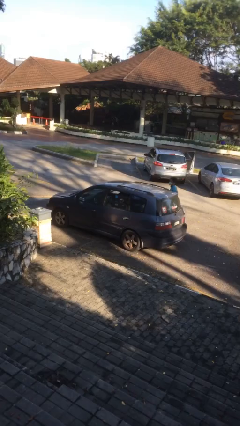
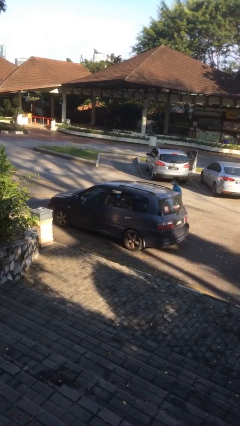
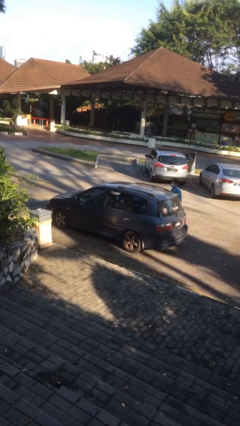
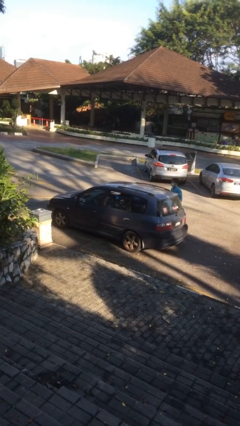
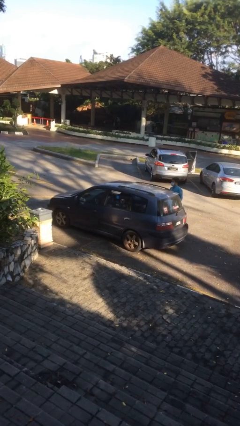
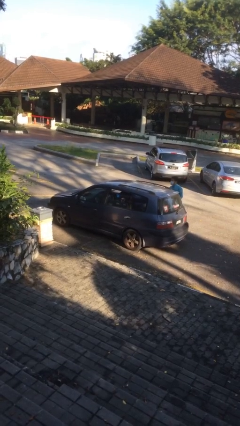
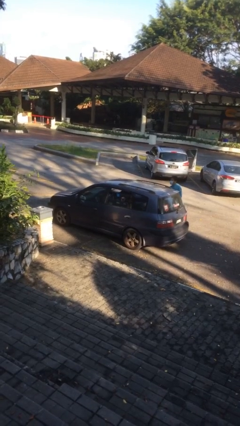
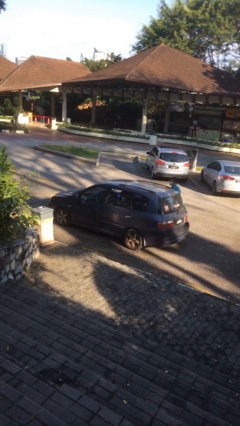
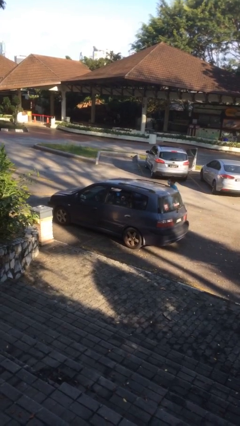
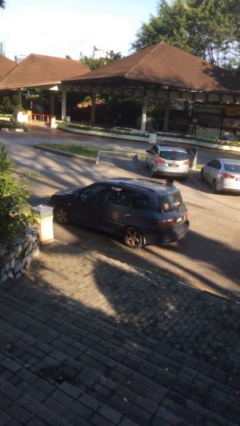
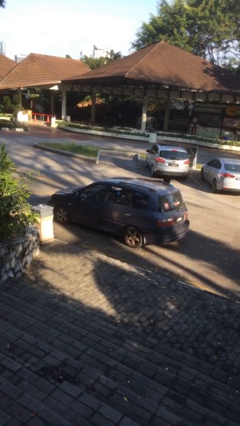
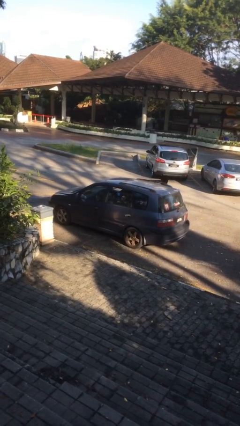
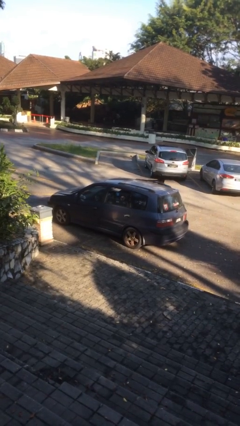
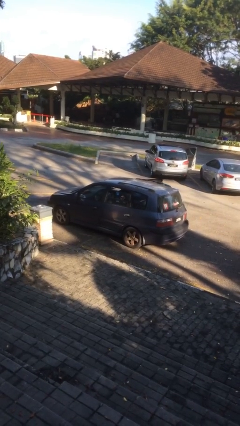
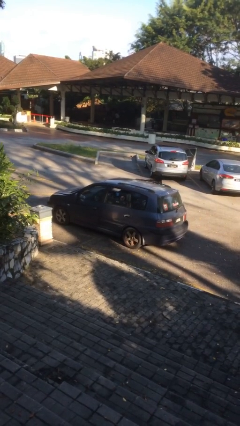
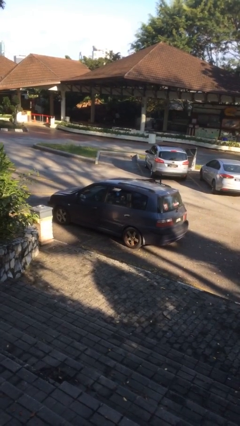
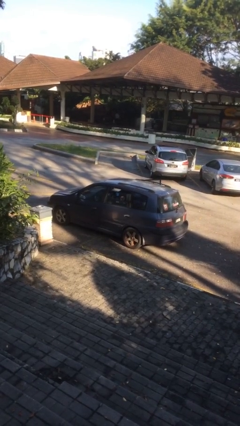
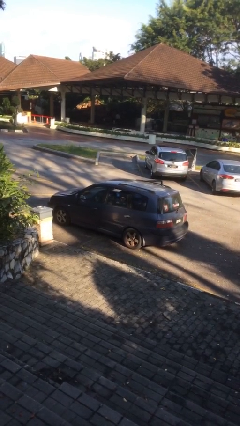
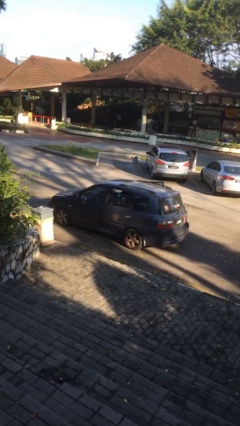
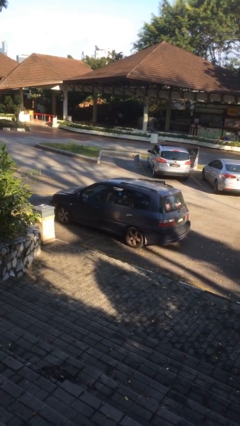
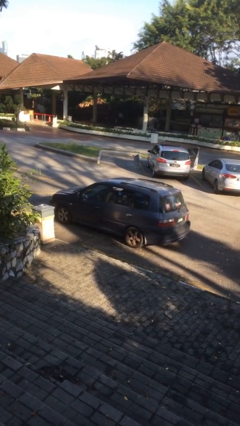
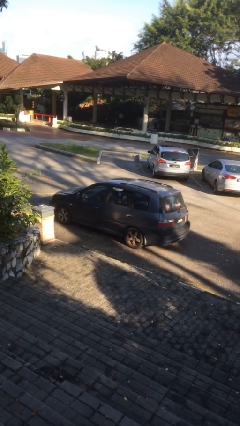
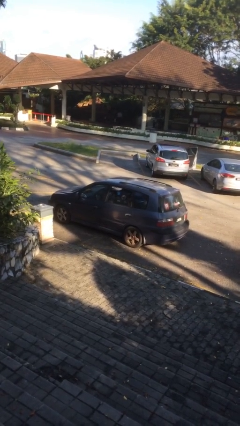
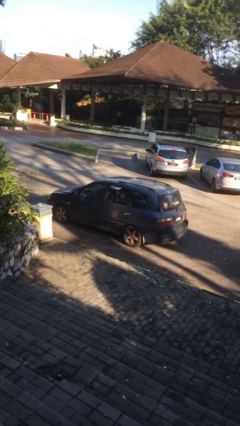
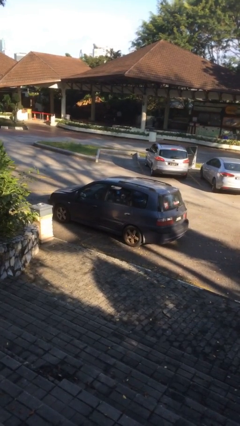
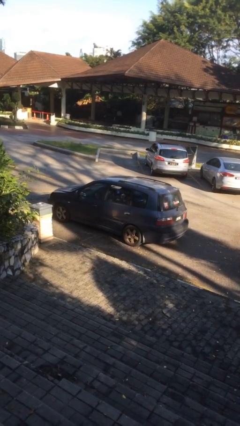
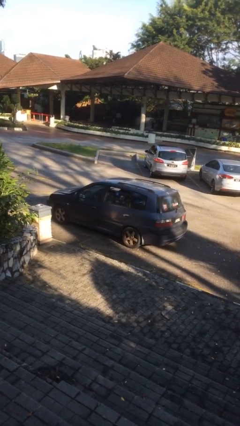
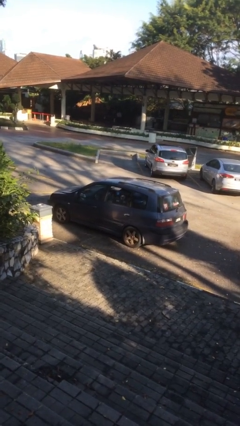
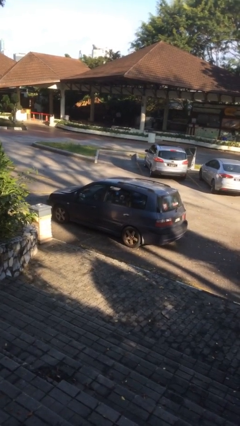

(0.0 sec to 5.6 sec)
car picks up person

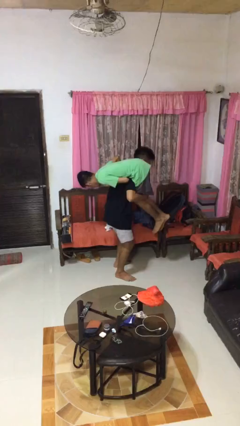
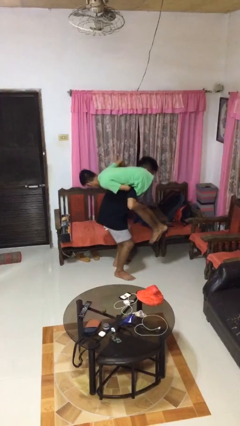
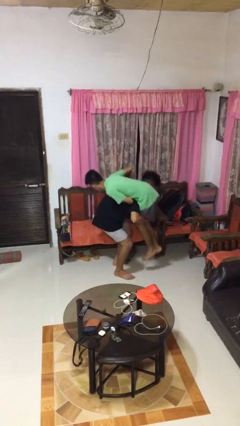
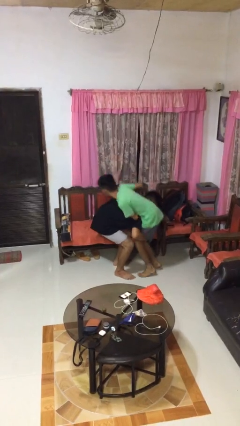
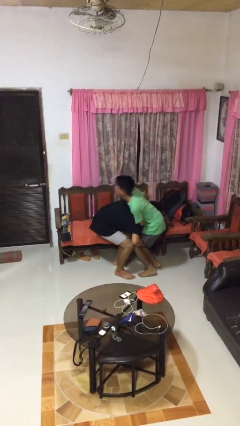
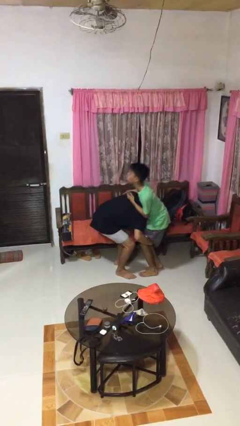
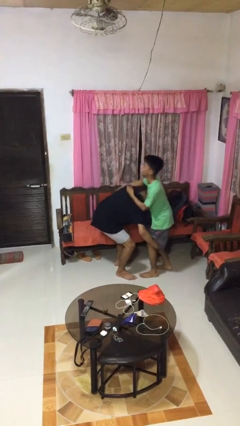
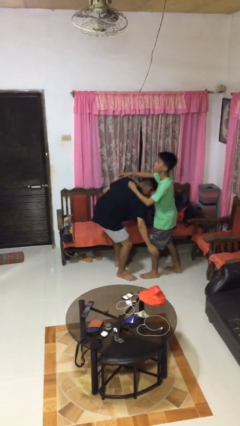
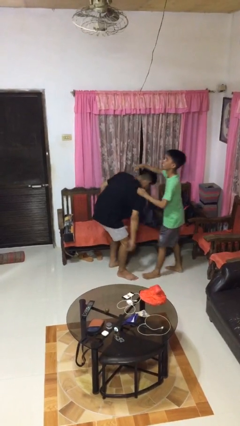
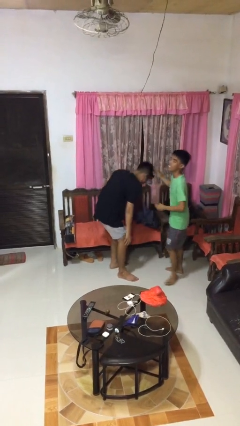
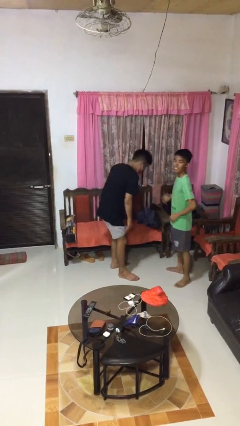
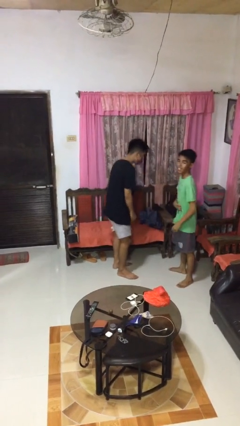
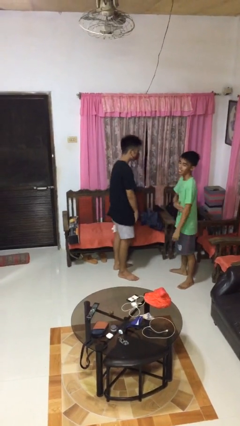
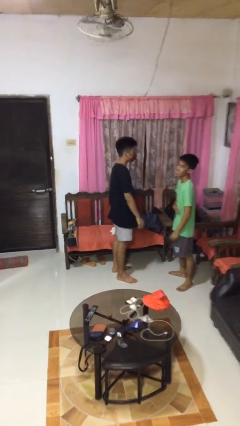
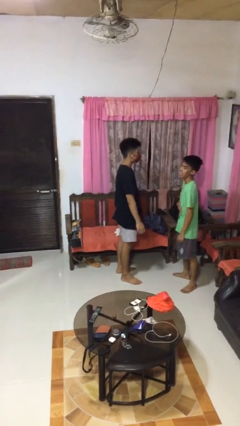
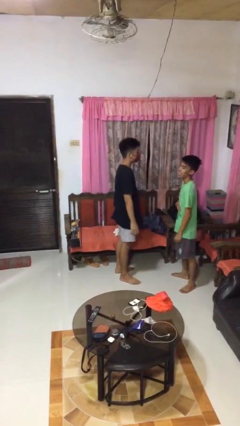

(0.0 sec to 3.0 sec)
person puts down person

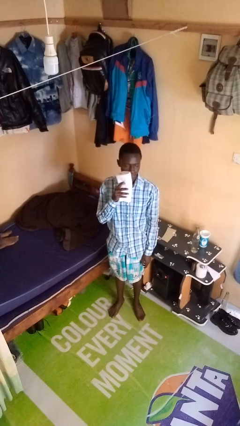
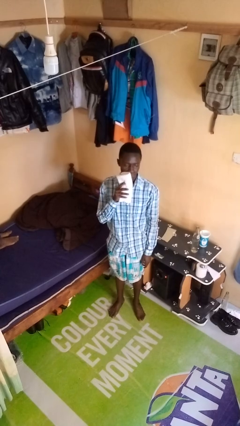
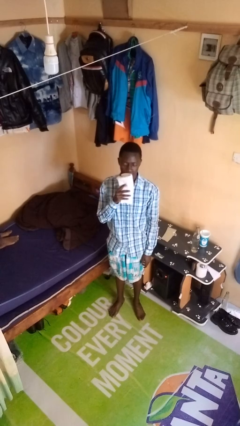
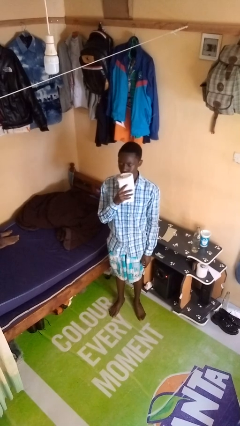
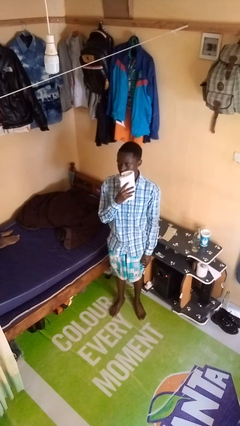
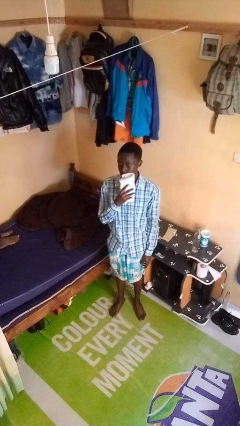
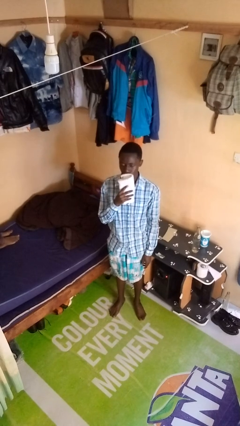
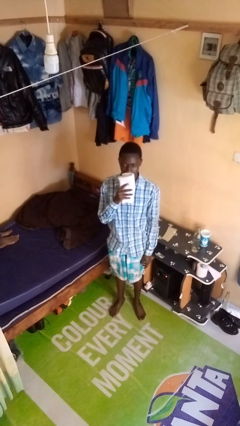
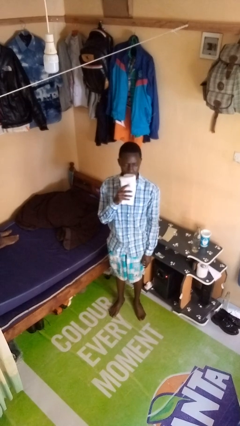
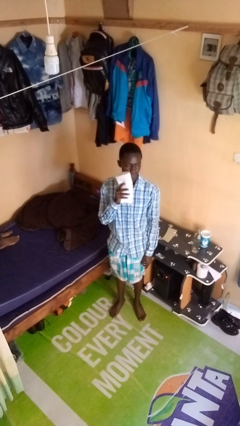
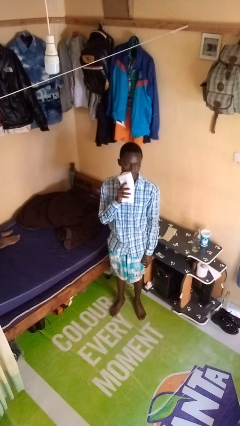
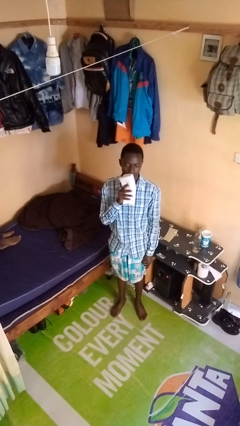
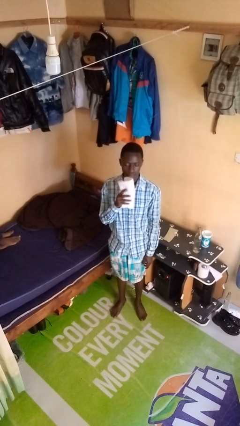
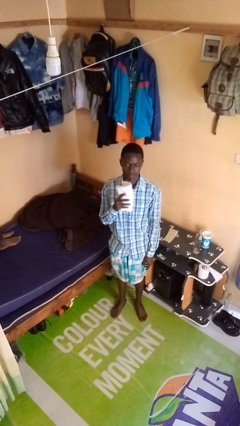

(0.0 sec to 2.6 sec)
person wipes mouth with napkin

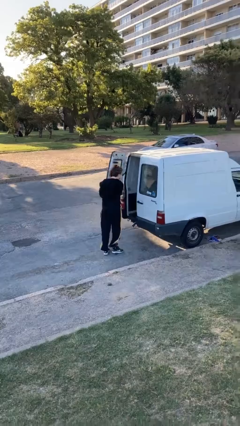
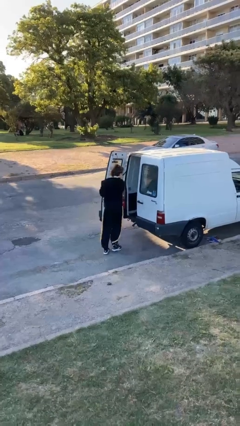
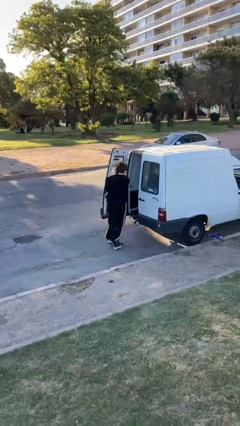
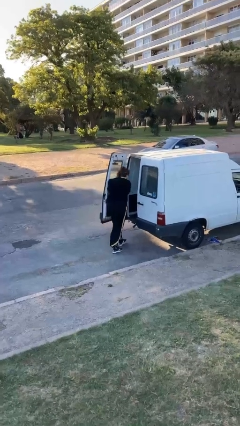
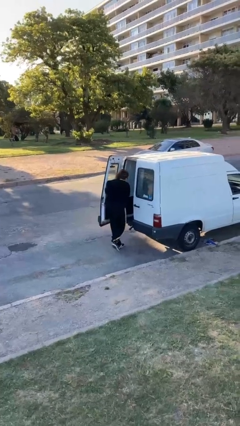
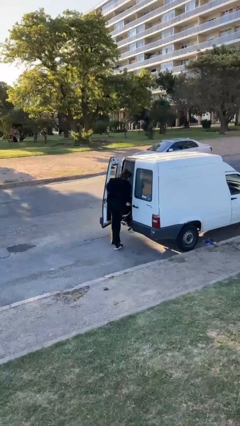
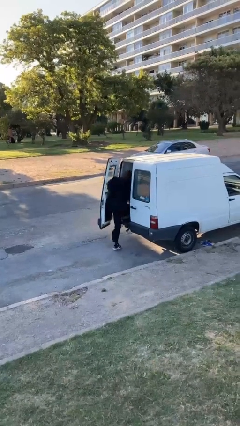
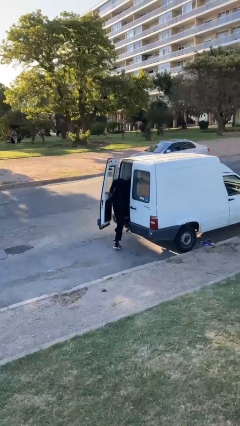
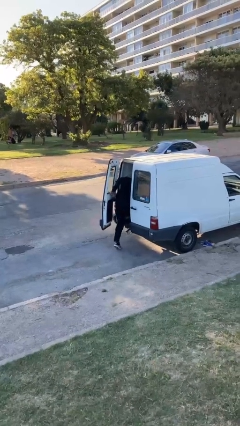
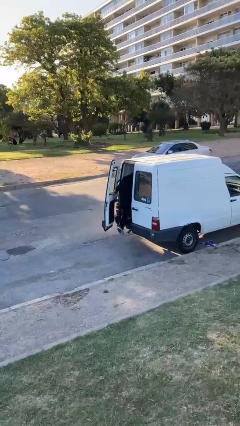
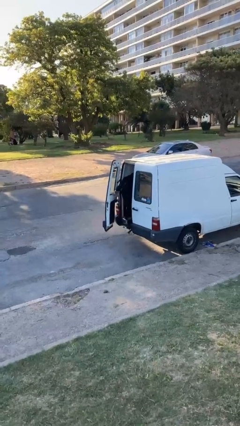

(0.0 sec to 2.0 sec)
person enters car

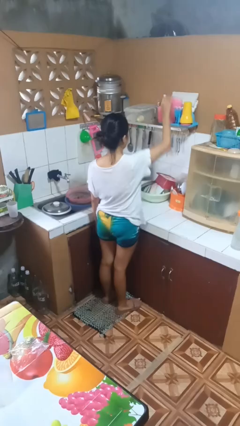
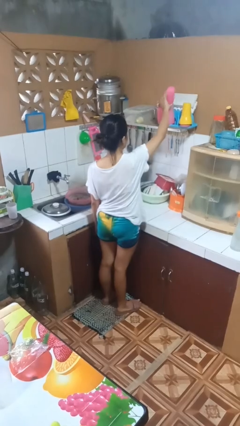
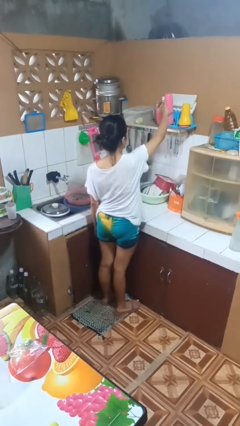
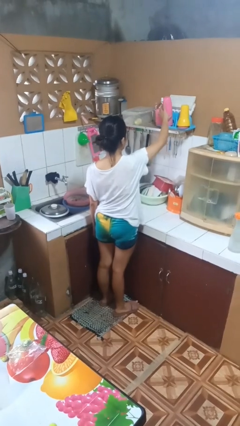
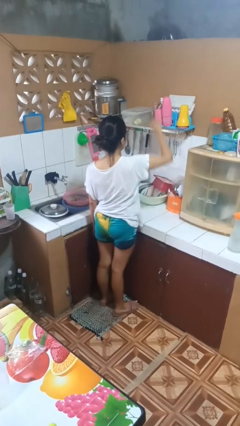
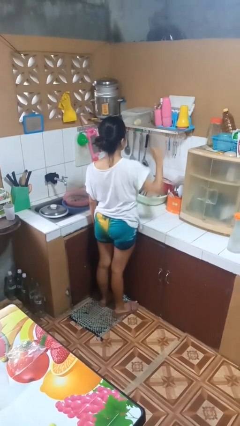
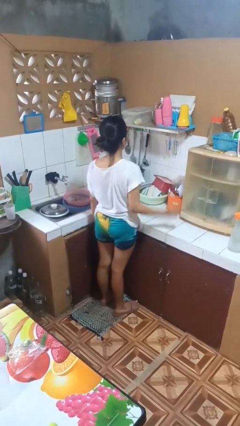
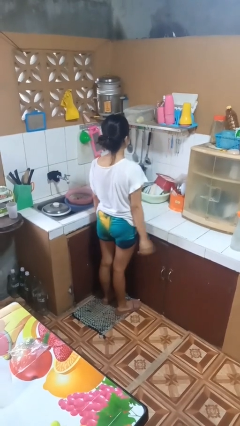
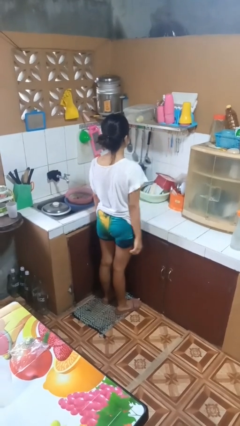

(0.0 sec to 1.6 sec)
person puts down object on shelf

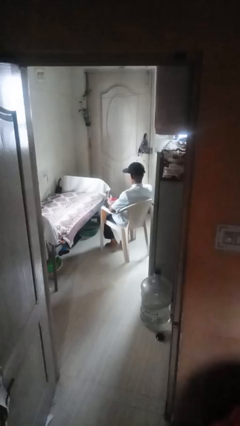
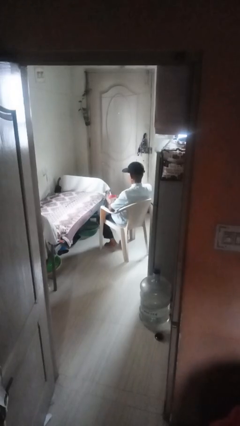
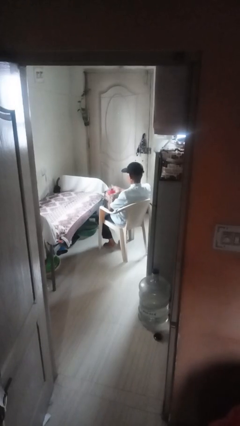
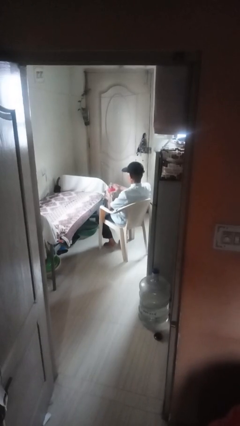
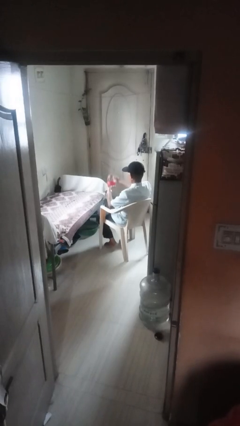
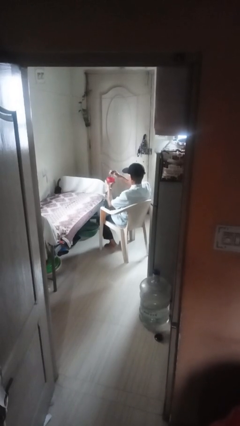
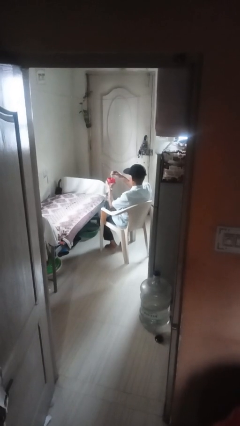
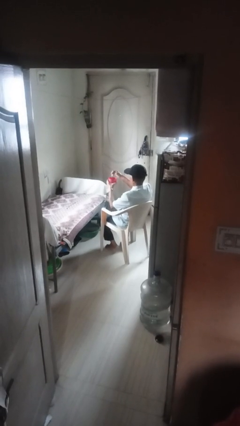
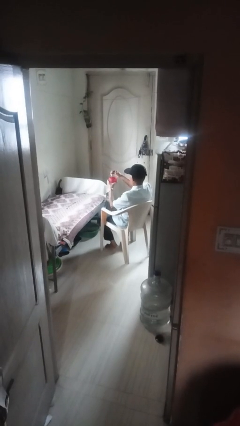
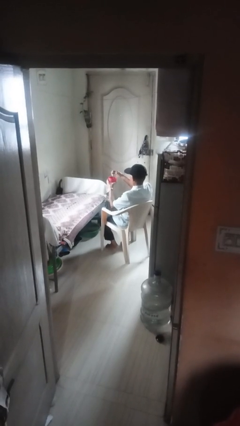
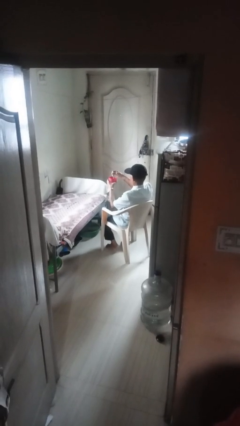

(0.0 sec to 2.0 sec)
person stirs mug

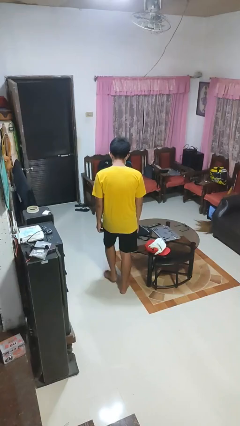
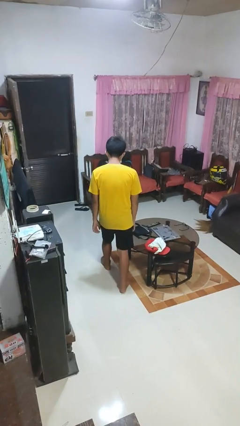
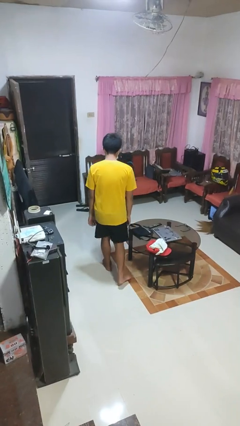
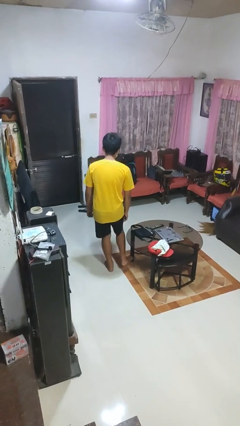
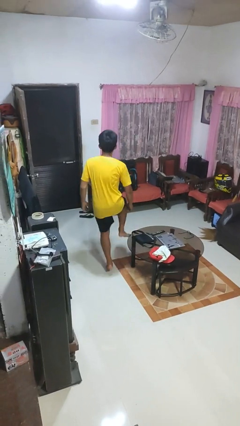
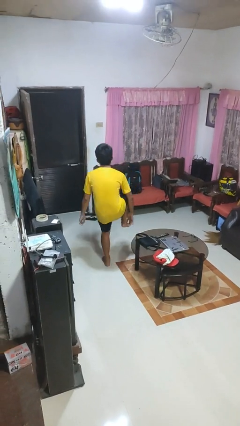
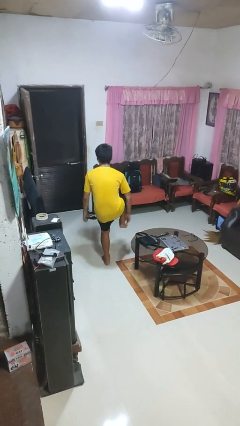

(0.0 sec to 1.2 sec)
person trips on object on floor
